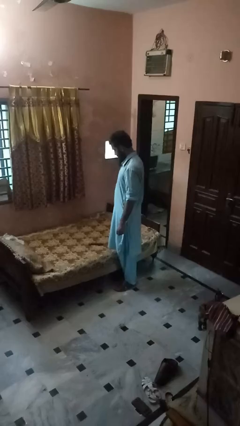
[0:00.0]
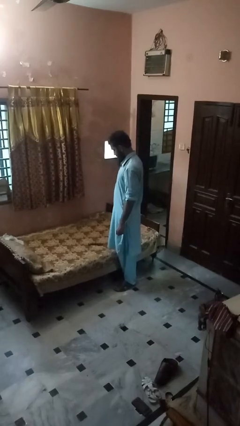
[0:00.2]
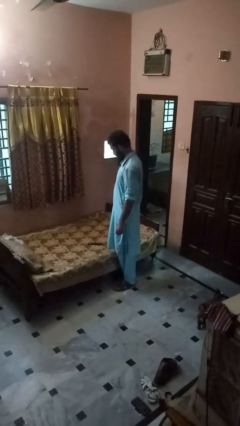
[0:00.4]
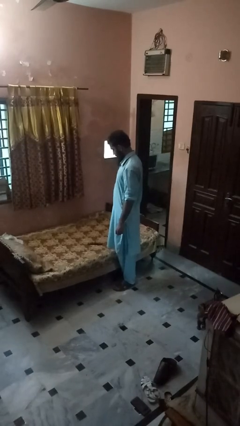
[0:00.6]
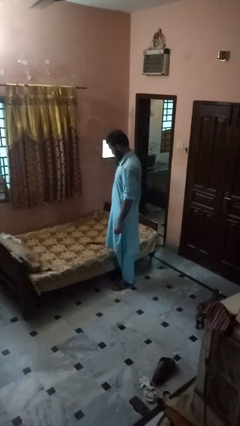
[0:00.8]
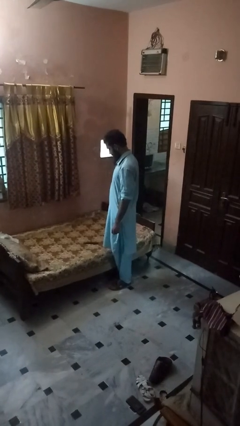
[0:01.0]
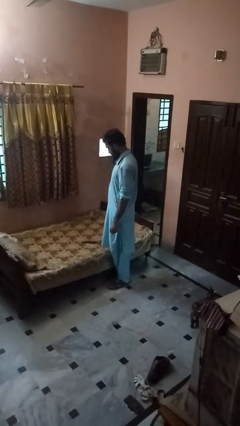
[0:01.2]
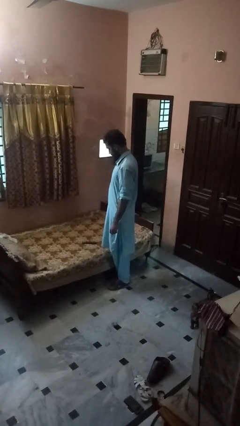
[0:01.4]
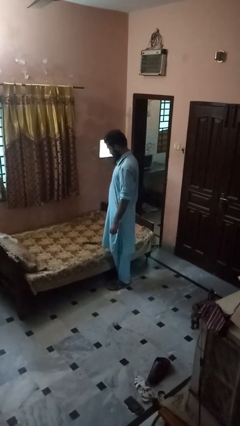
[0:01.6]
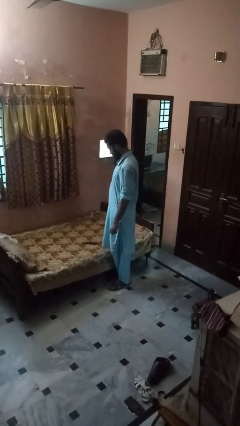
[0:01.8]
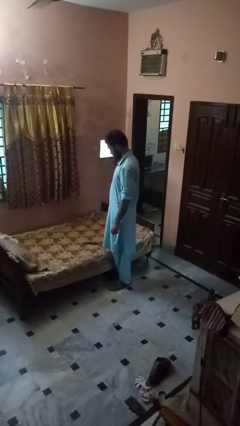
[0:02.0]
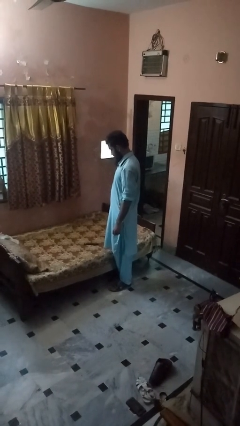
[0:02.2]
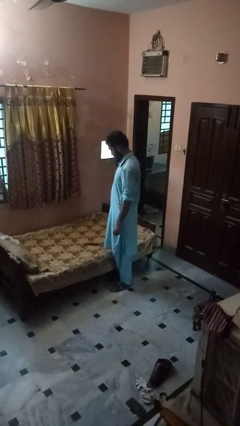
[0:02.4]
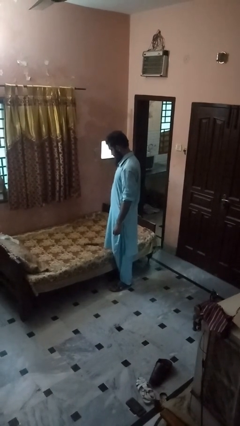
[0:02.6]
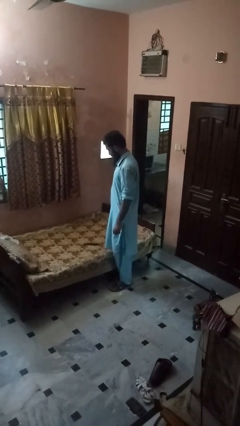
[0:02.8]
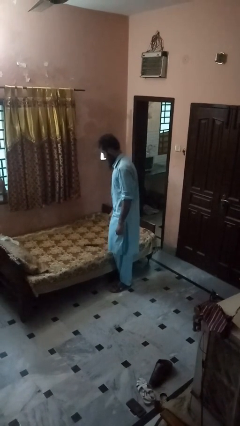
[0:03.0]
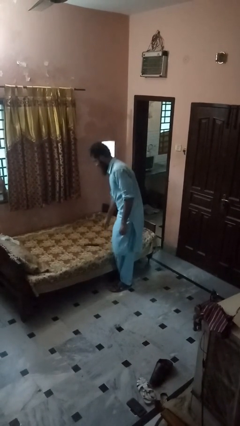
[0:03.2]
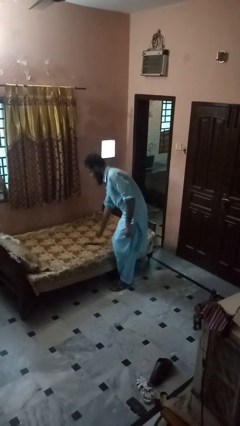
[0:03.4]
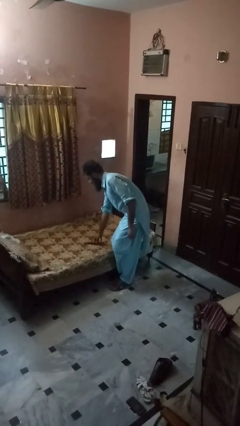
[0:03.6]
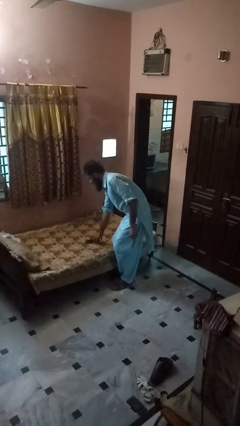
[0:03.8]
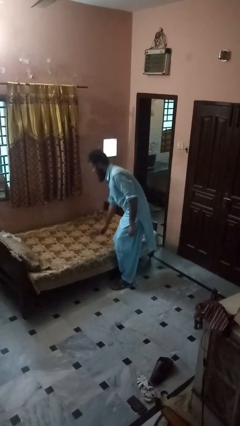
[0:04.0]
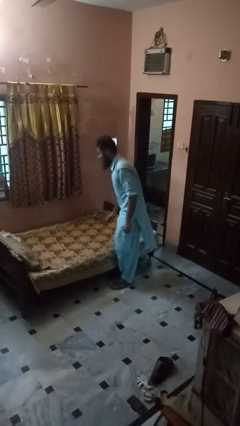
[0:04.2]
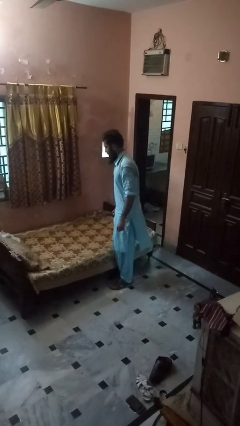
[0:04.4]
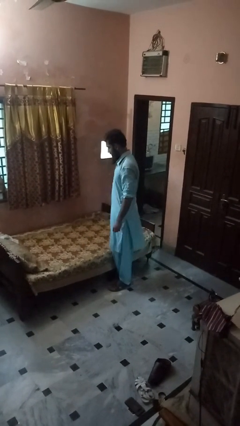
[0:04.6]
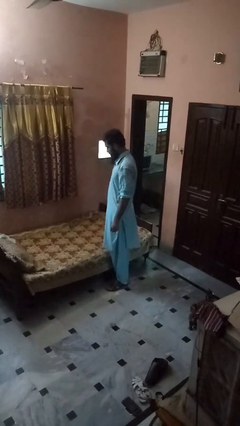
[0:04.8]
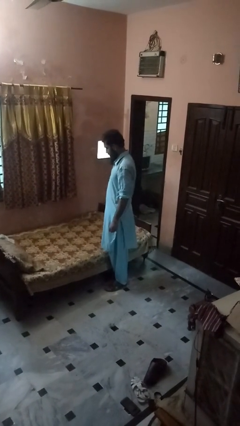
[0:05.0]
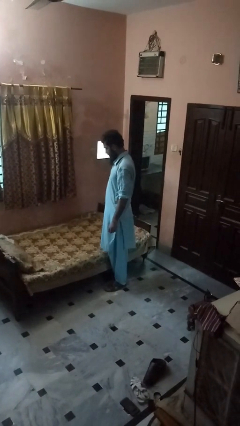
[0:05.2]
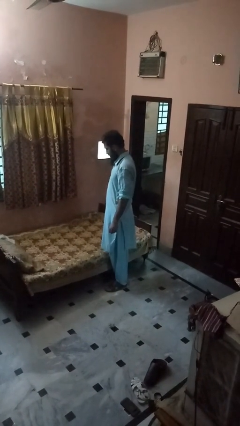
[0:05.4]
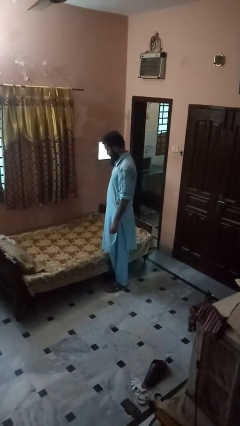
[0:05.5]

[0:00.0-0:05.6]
person picks up object from bed

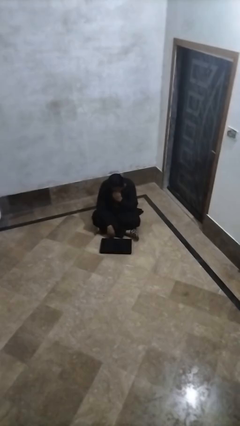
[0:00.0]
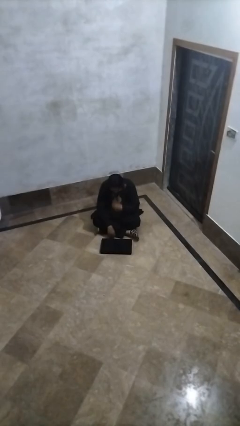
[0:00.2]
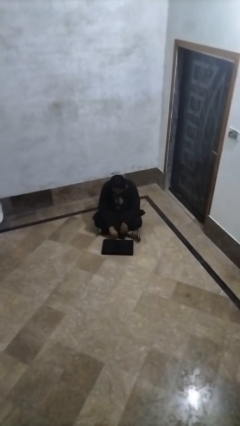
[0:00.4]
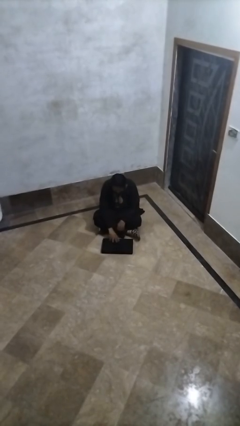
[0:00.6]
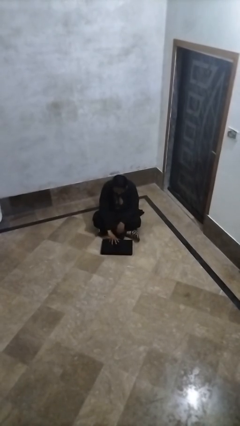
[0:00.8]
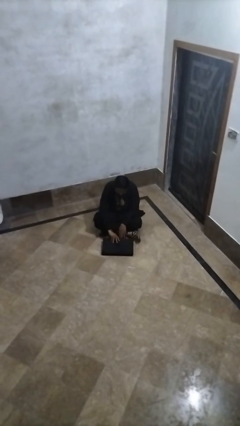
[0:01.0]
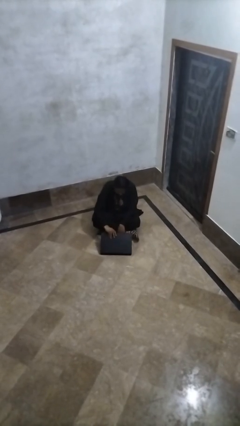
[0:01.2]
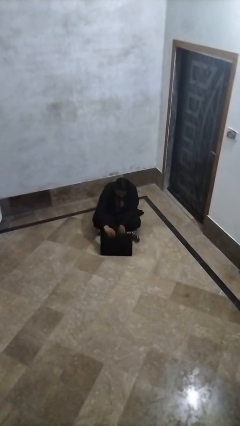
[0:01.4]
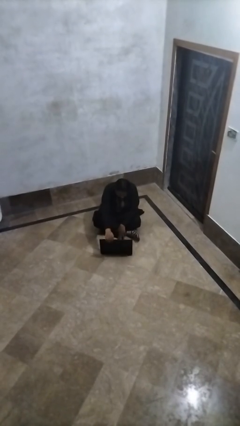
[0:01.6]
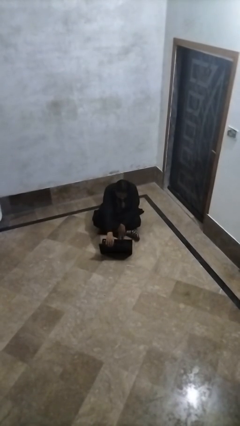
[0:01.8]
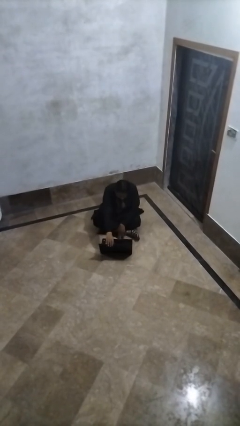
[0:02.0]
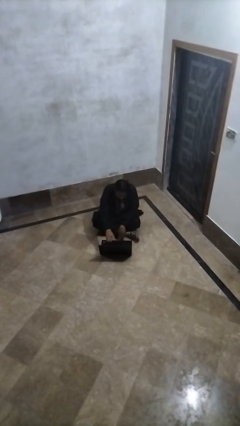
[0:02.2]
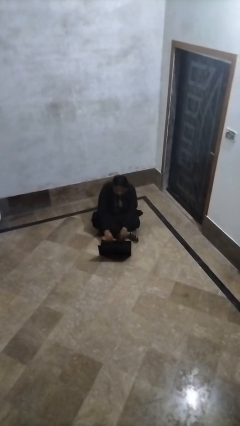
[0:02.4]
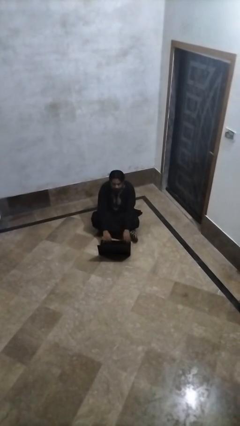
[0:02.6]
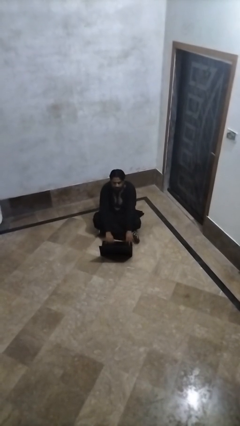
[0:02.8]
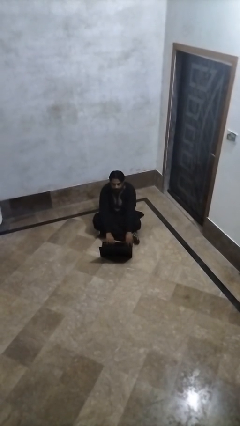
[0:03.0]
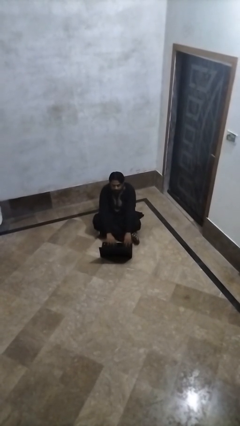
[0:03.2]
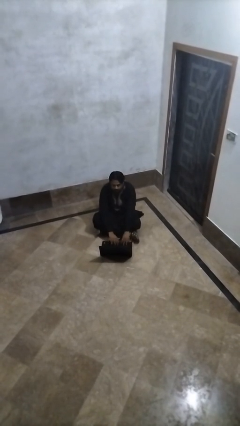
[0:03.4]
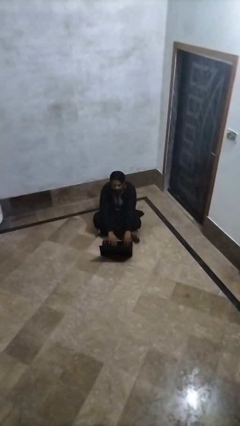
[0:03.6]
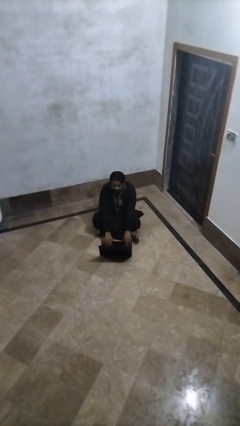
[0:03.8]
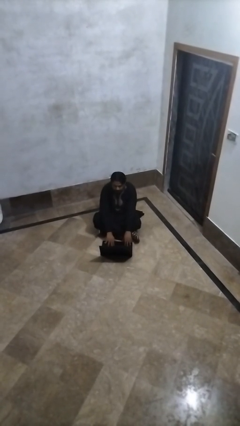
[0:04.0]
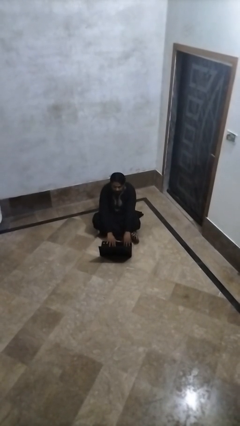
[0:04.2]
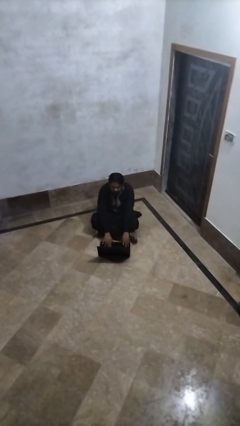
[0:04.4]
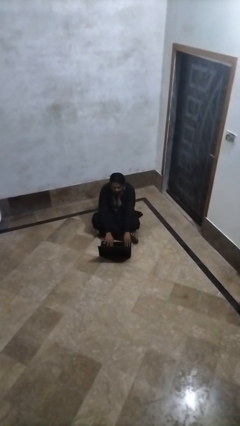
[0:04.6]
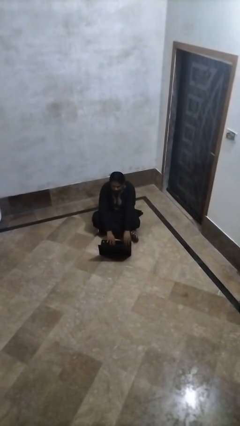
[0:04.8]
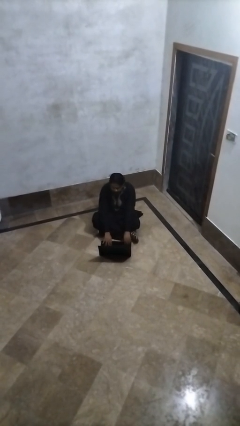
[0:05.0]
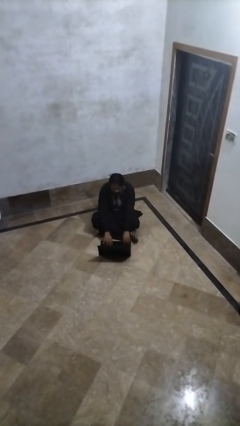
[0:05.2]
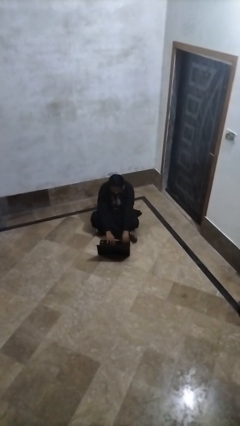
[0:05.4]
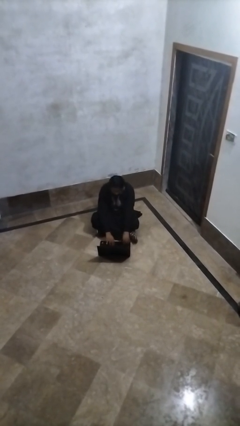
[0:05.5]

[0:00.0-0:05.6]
person opens laptop

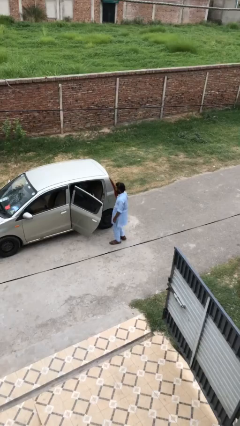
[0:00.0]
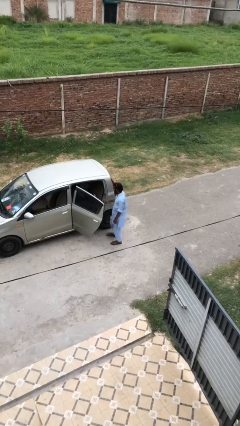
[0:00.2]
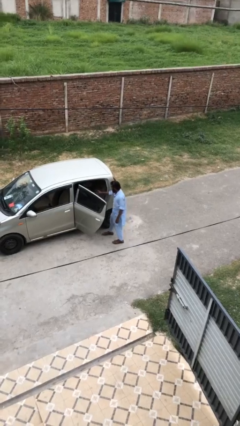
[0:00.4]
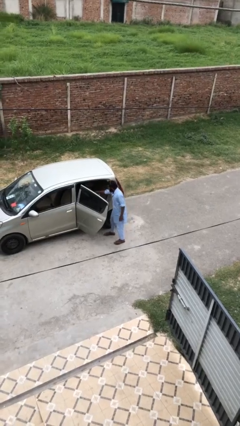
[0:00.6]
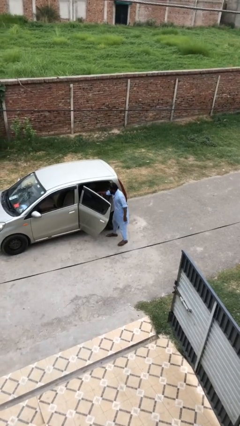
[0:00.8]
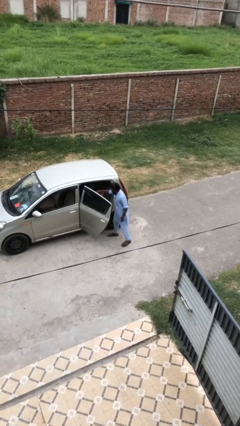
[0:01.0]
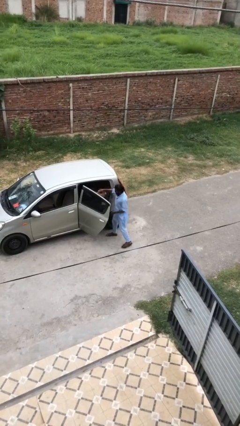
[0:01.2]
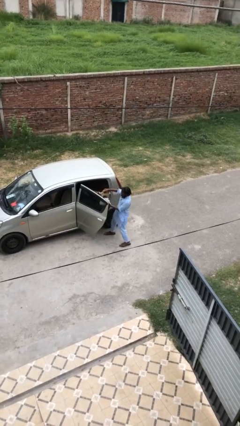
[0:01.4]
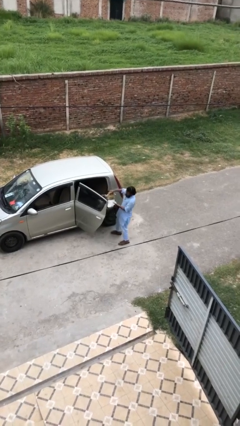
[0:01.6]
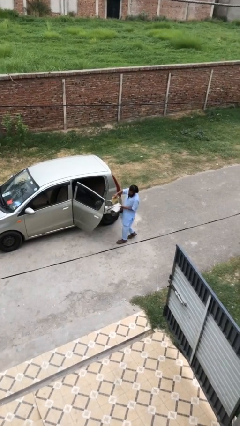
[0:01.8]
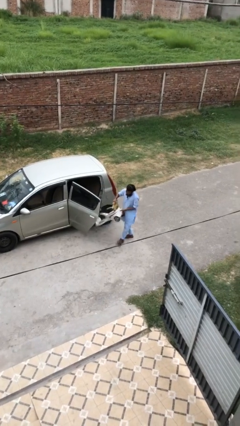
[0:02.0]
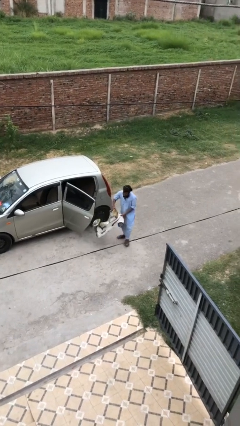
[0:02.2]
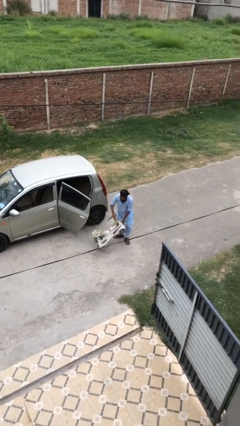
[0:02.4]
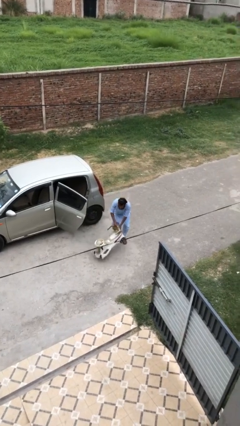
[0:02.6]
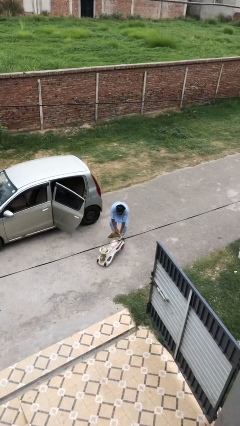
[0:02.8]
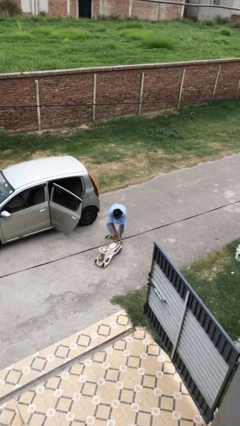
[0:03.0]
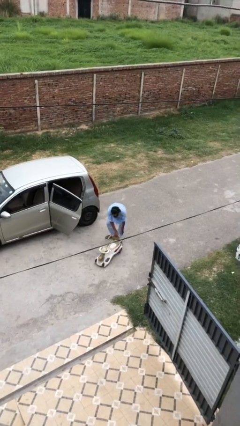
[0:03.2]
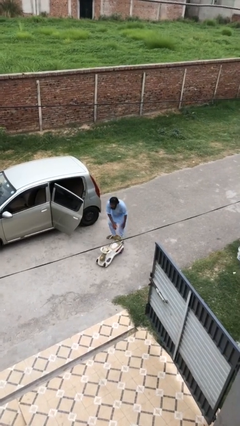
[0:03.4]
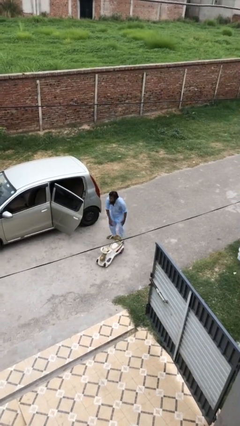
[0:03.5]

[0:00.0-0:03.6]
person unloads car

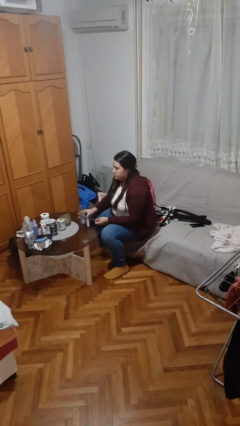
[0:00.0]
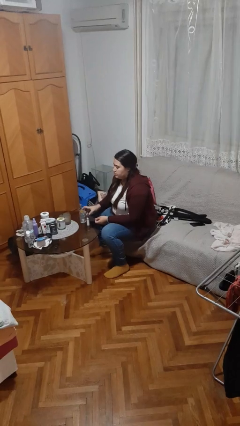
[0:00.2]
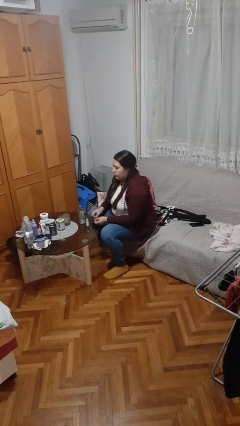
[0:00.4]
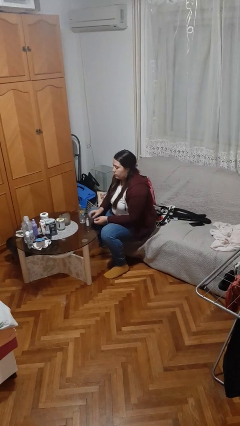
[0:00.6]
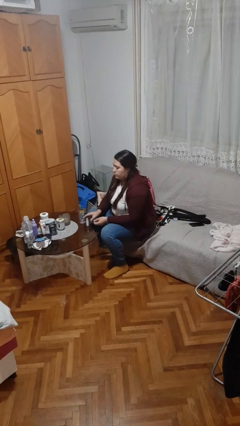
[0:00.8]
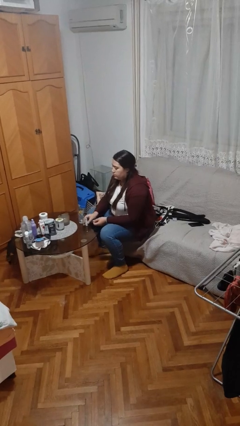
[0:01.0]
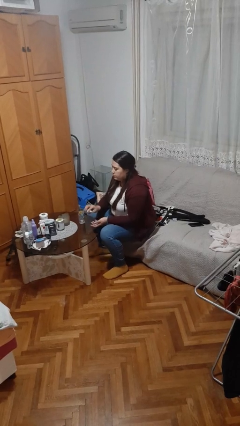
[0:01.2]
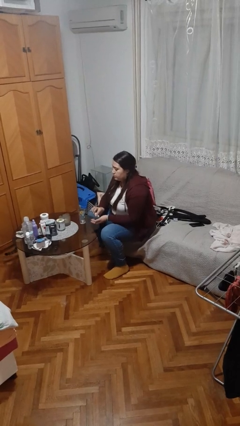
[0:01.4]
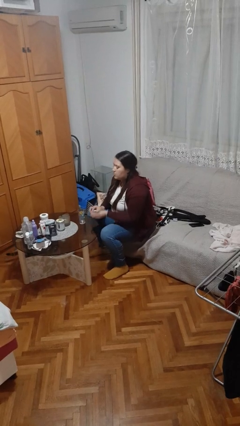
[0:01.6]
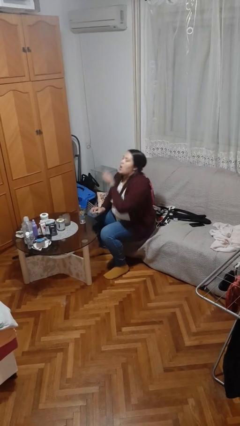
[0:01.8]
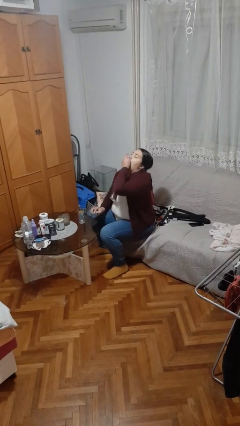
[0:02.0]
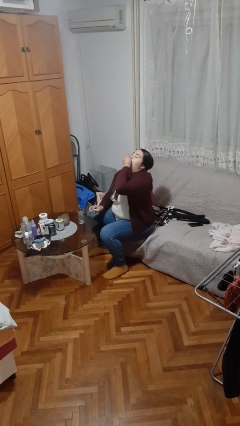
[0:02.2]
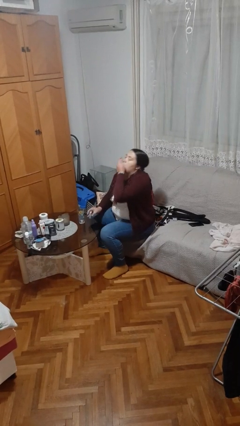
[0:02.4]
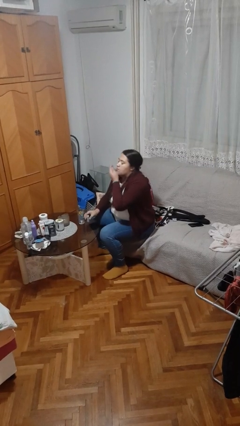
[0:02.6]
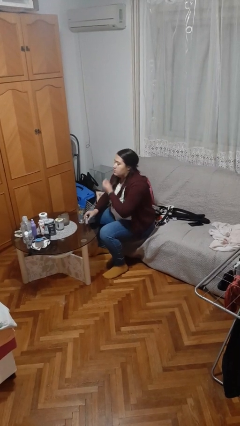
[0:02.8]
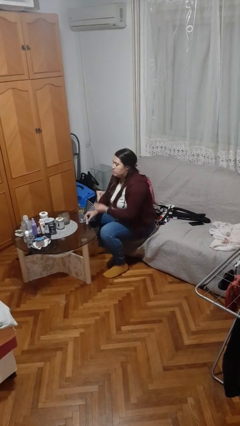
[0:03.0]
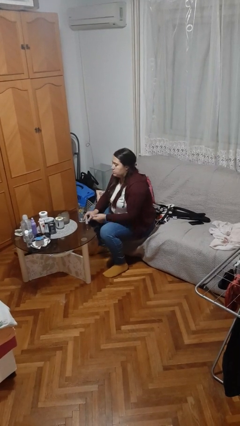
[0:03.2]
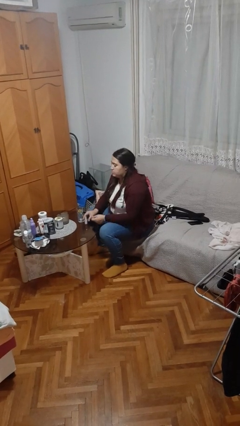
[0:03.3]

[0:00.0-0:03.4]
person takes medicine pills
